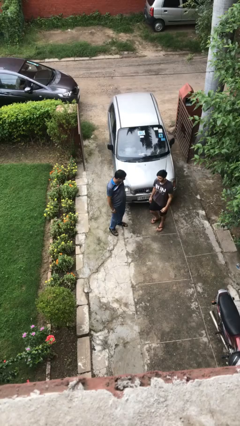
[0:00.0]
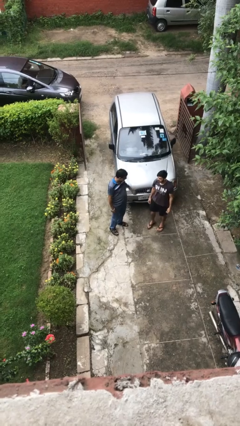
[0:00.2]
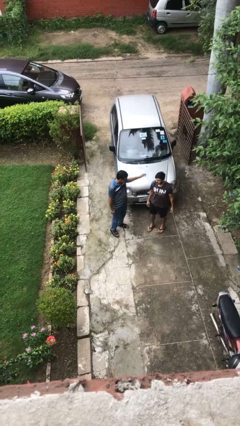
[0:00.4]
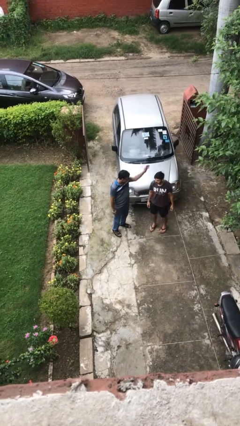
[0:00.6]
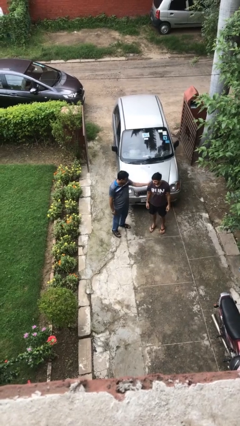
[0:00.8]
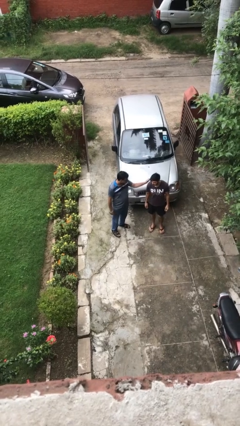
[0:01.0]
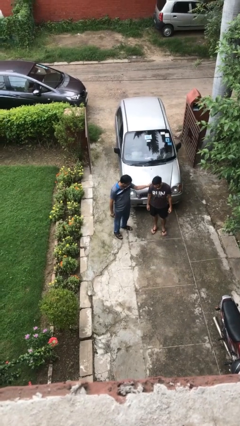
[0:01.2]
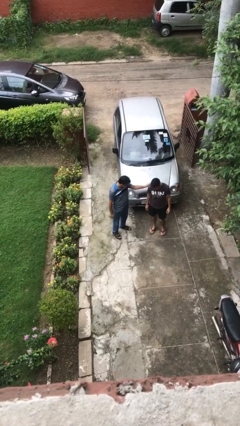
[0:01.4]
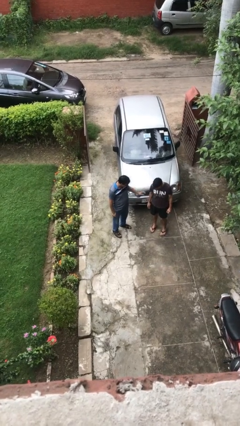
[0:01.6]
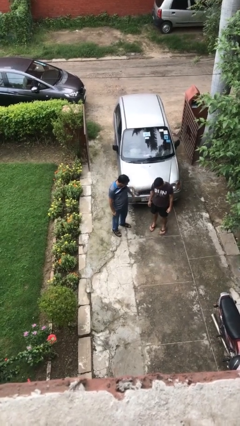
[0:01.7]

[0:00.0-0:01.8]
person pounds shoulders of person

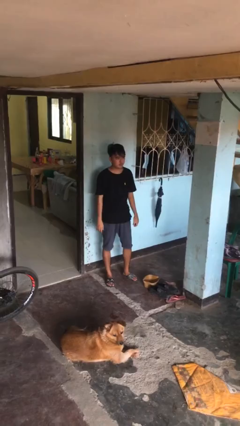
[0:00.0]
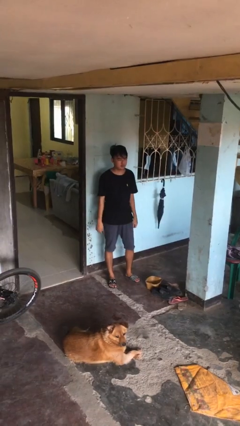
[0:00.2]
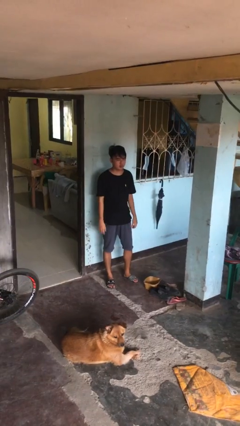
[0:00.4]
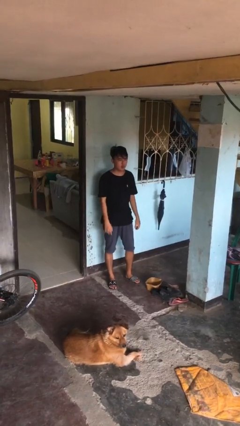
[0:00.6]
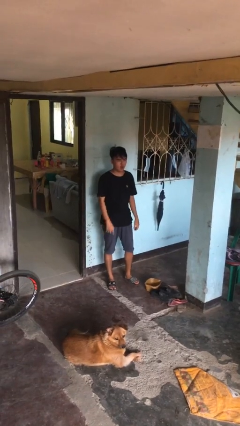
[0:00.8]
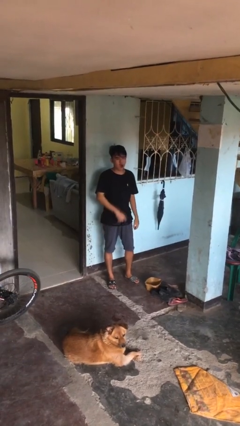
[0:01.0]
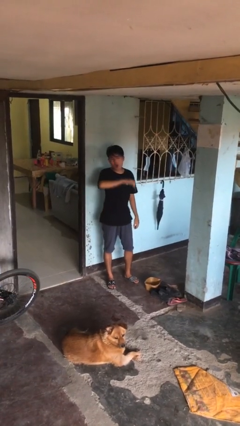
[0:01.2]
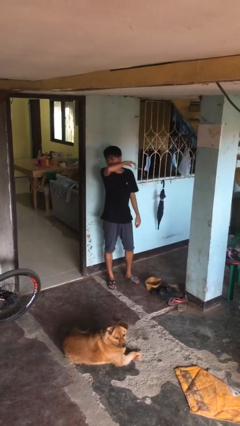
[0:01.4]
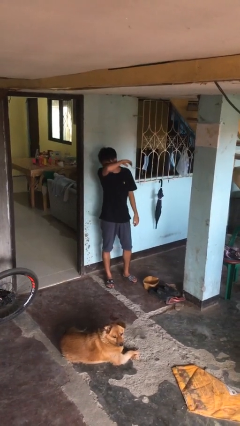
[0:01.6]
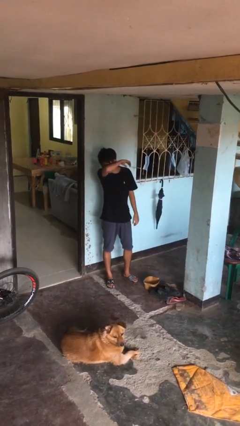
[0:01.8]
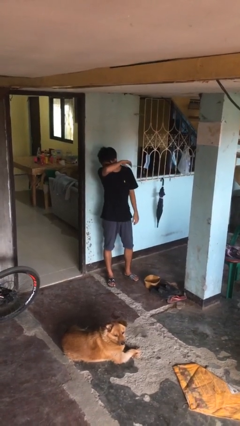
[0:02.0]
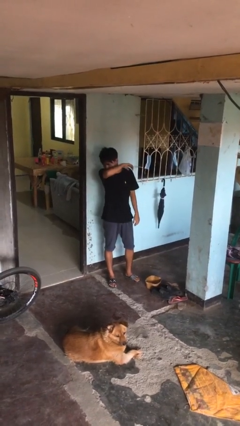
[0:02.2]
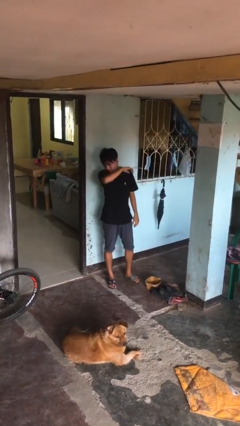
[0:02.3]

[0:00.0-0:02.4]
person sneezes into arm

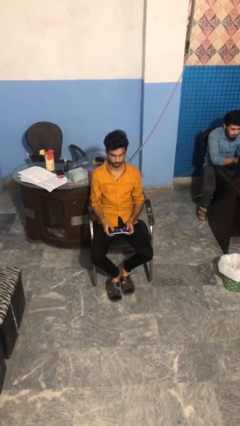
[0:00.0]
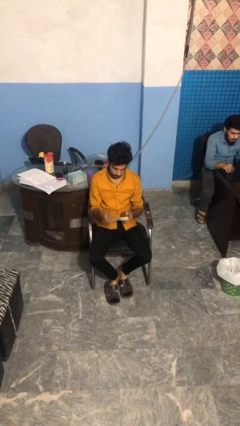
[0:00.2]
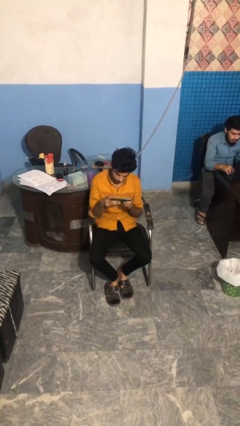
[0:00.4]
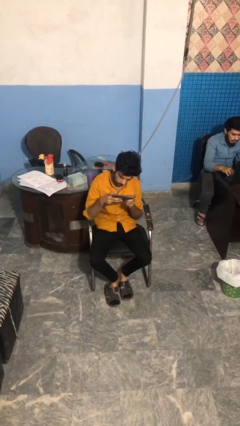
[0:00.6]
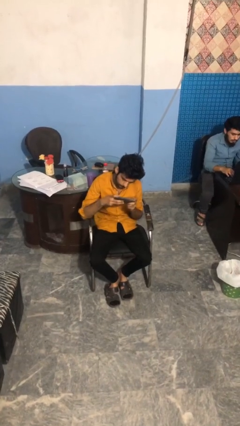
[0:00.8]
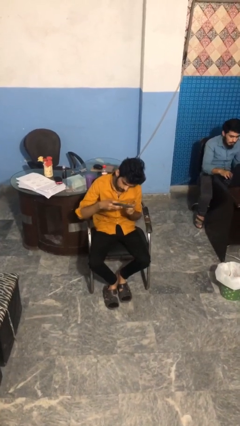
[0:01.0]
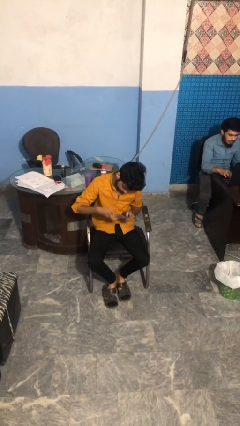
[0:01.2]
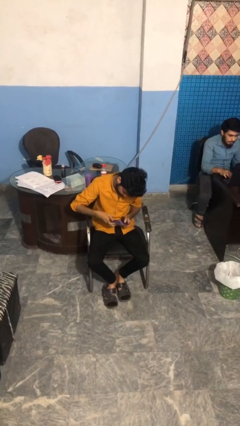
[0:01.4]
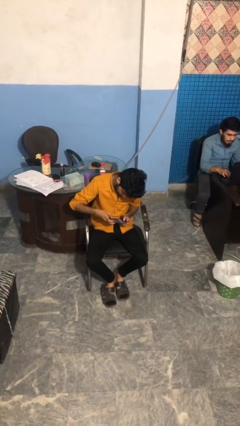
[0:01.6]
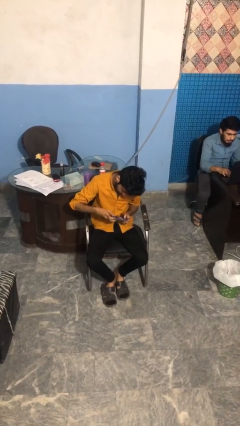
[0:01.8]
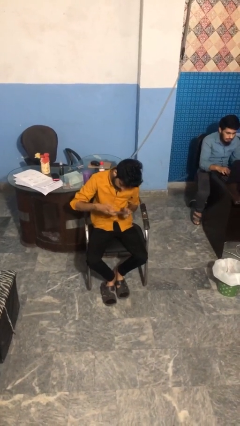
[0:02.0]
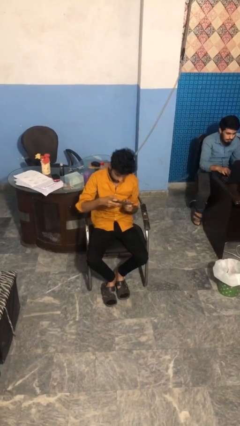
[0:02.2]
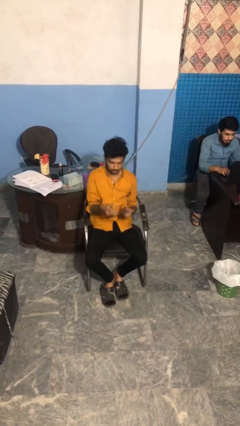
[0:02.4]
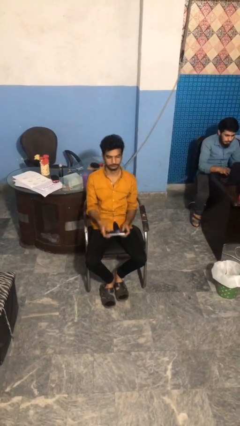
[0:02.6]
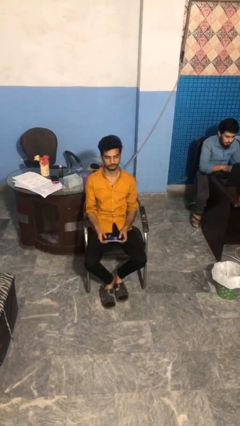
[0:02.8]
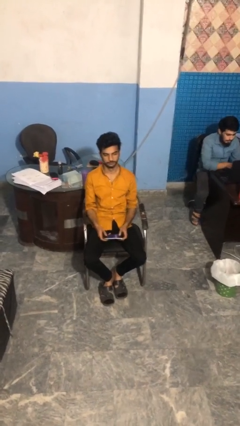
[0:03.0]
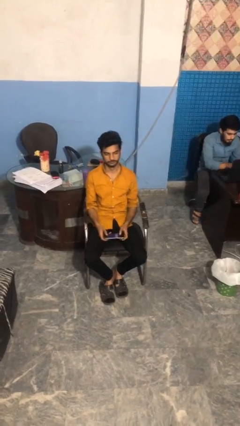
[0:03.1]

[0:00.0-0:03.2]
person interacts with handheld game

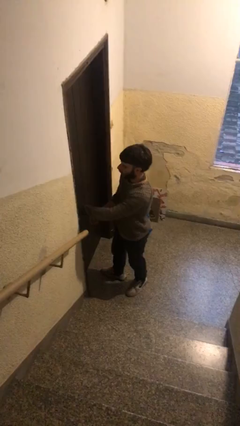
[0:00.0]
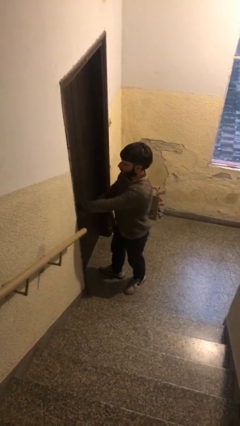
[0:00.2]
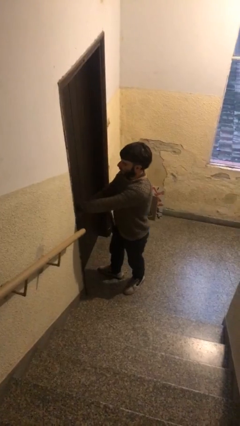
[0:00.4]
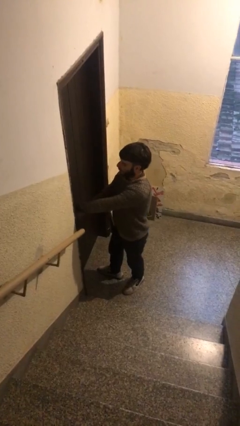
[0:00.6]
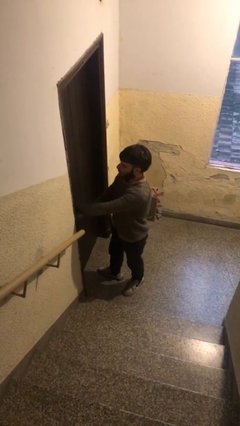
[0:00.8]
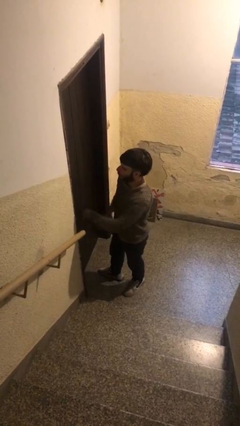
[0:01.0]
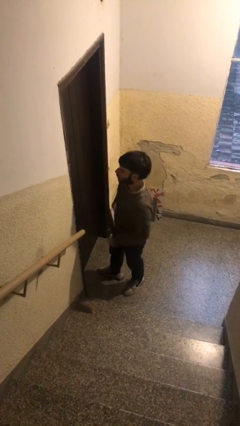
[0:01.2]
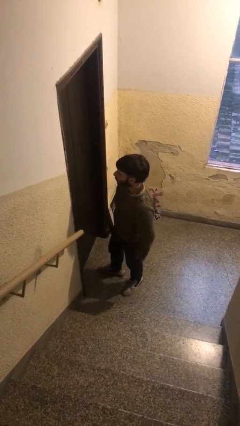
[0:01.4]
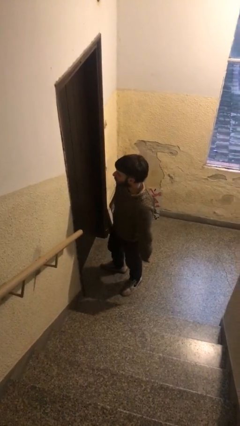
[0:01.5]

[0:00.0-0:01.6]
person locks door with keys

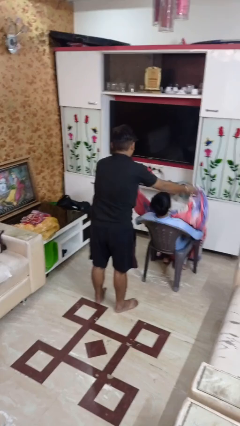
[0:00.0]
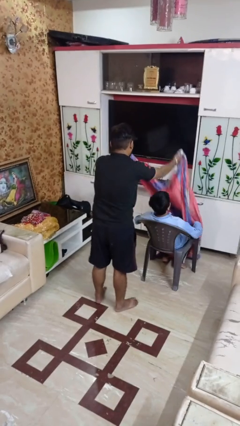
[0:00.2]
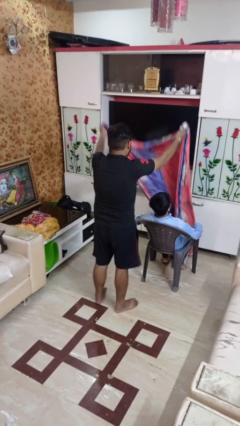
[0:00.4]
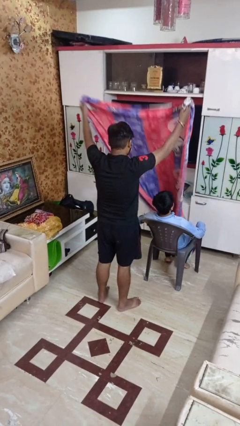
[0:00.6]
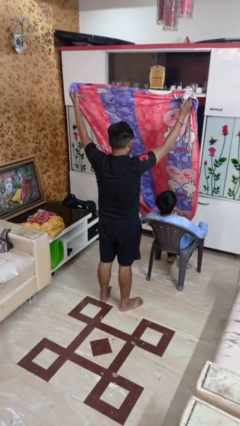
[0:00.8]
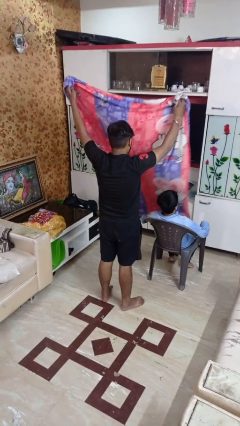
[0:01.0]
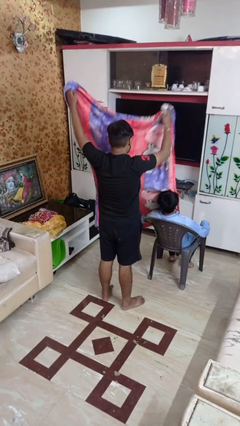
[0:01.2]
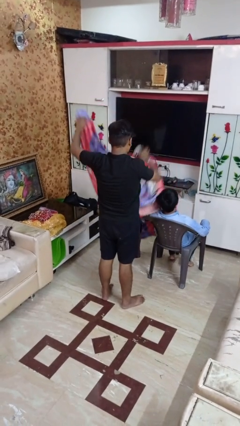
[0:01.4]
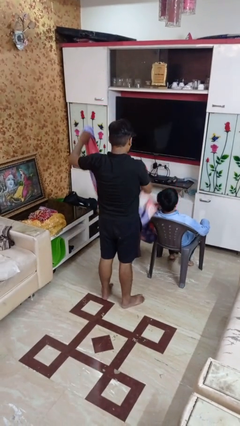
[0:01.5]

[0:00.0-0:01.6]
person uncovers friend with blanket

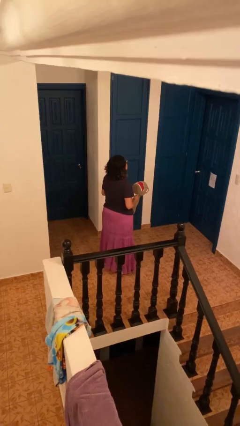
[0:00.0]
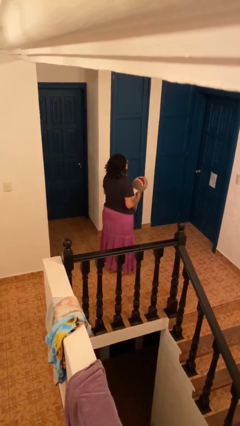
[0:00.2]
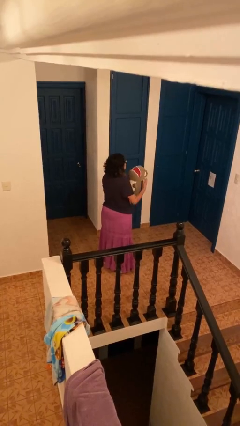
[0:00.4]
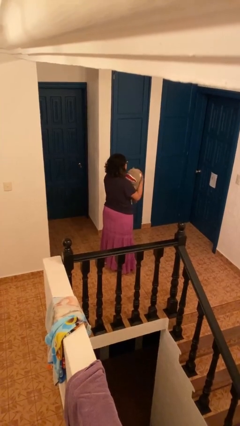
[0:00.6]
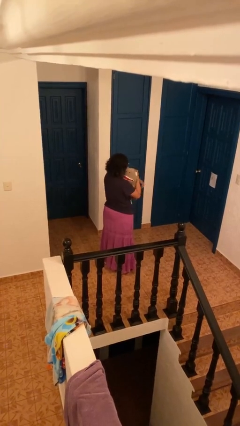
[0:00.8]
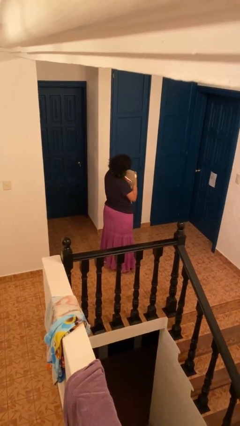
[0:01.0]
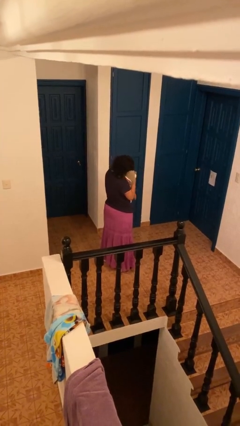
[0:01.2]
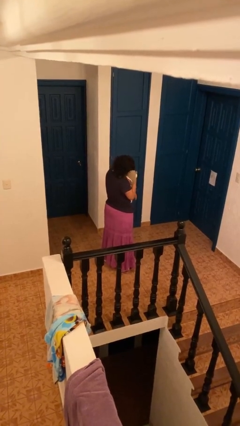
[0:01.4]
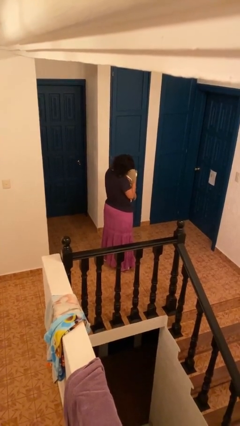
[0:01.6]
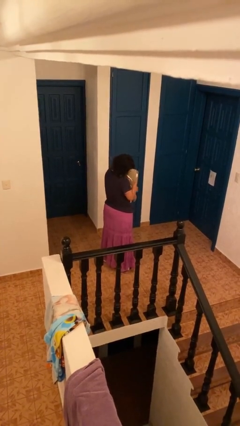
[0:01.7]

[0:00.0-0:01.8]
person hugs stuffed animal

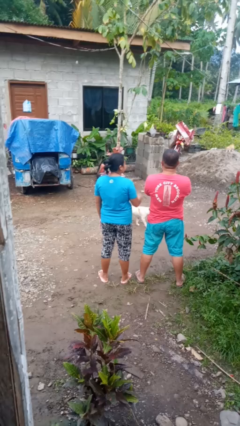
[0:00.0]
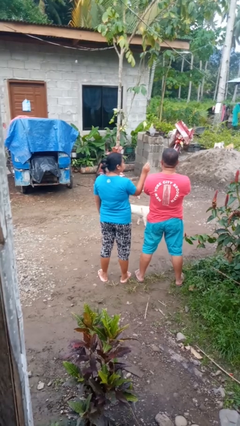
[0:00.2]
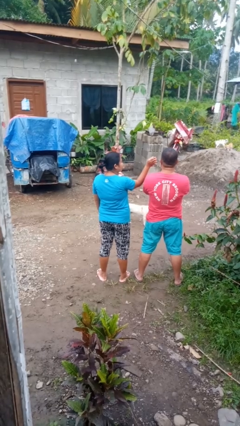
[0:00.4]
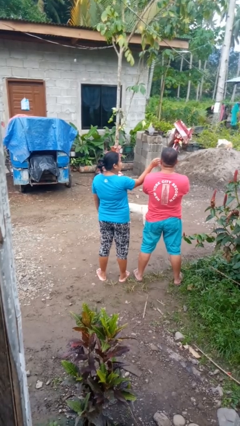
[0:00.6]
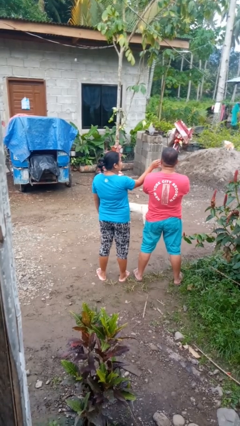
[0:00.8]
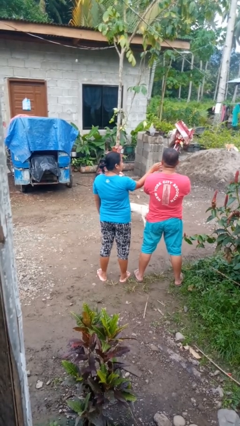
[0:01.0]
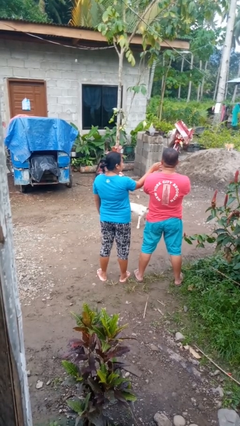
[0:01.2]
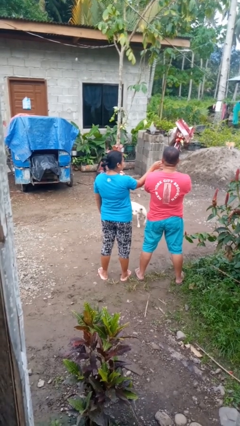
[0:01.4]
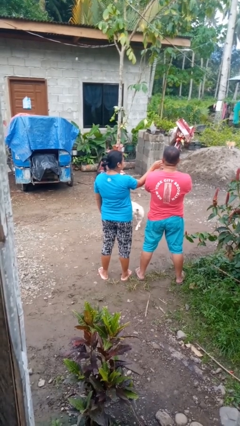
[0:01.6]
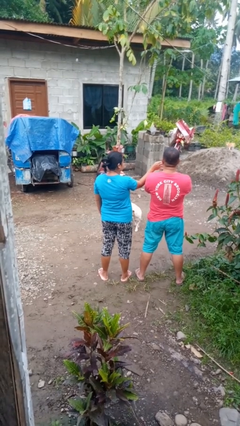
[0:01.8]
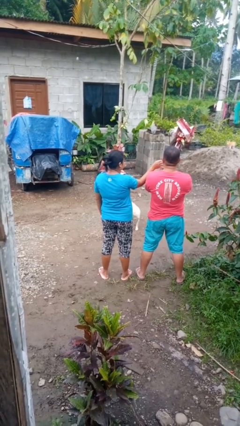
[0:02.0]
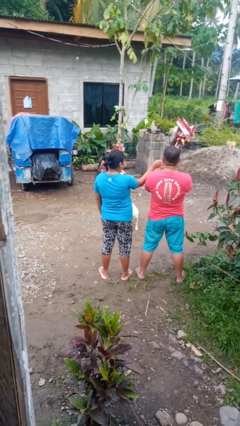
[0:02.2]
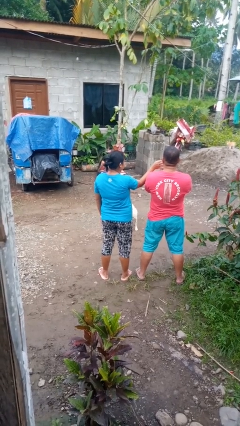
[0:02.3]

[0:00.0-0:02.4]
person touches face of person

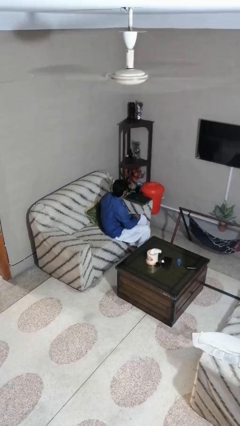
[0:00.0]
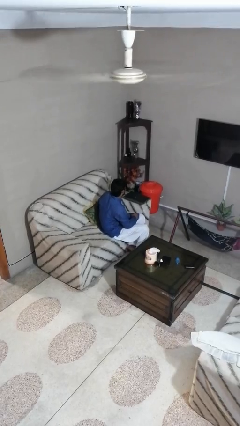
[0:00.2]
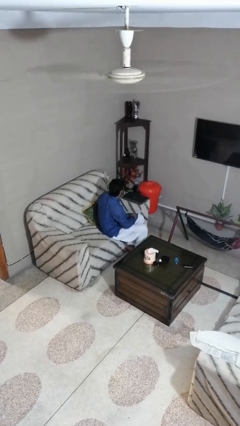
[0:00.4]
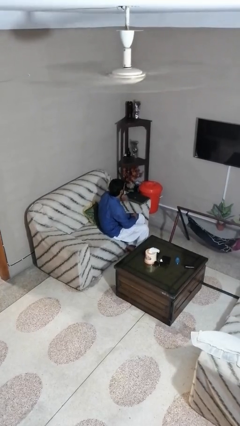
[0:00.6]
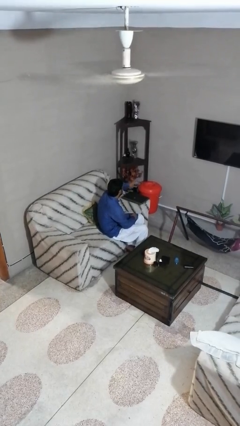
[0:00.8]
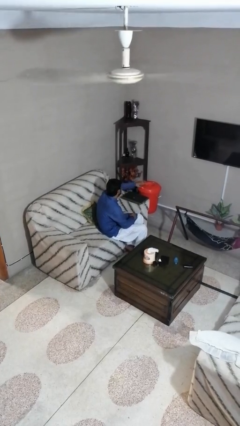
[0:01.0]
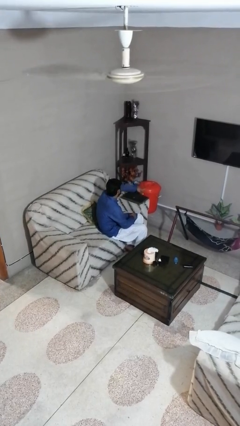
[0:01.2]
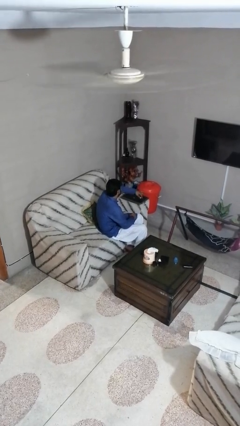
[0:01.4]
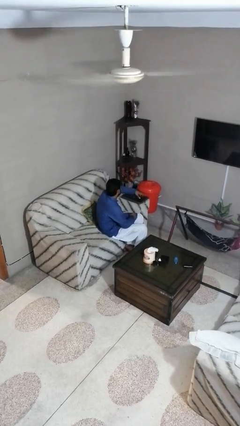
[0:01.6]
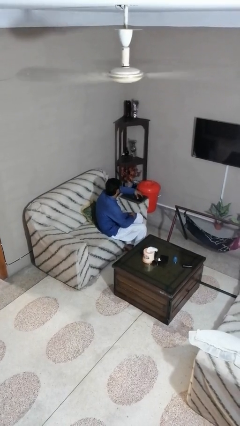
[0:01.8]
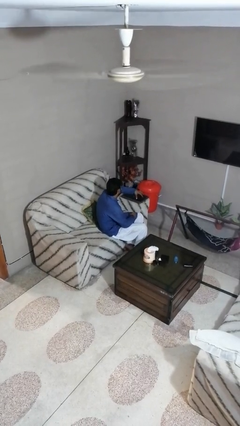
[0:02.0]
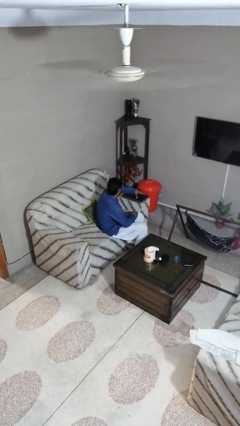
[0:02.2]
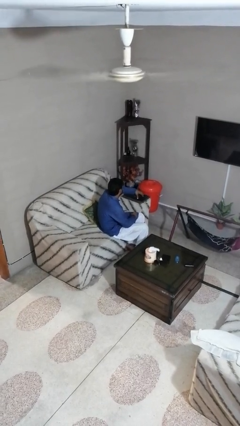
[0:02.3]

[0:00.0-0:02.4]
person taps object with finger
